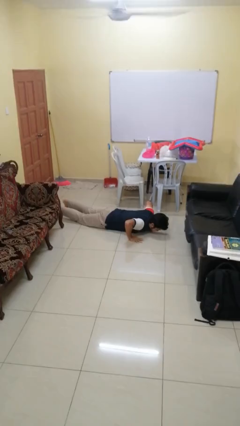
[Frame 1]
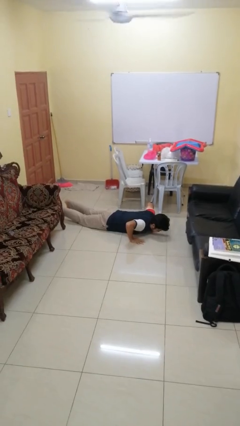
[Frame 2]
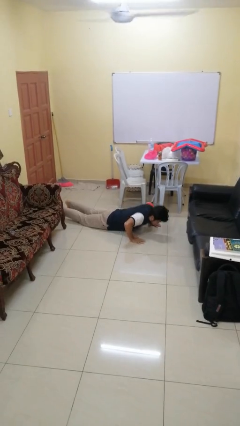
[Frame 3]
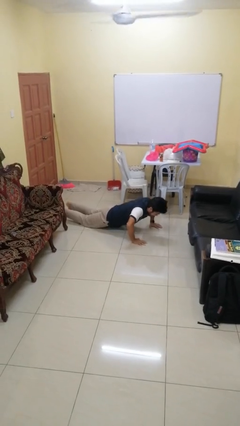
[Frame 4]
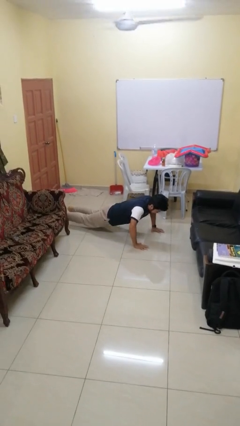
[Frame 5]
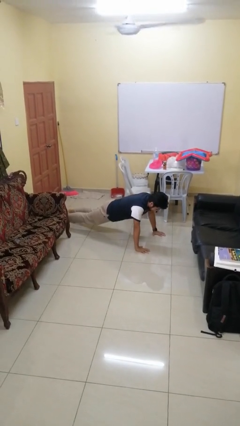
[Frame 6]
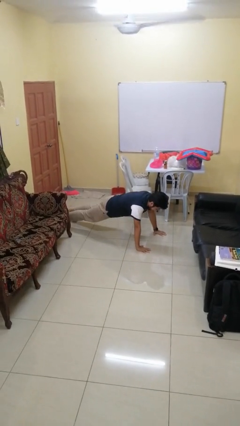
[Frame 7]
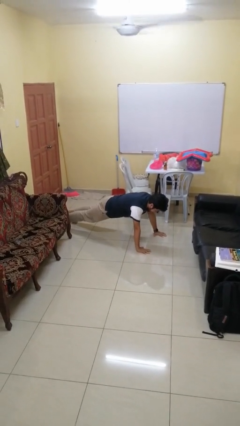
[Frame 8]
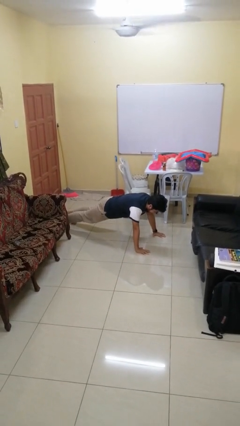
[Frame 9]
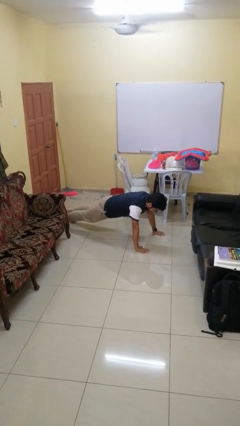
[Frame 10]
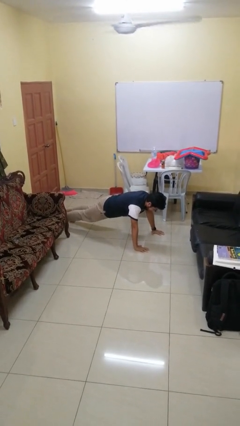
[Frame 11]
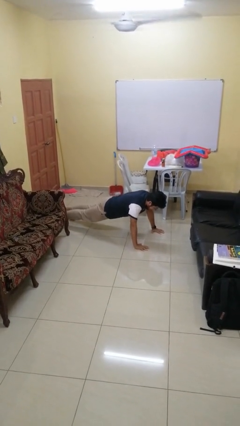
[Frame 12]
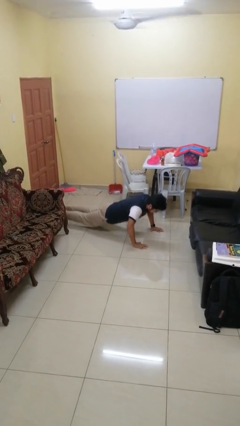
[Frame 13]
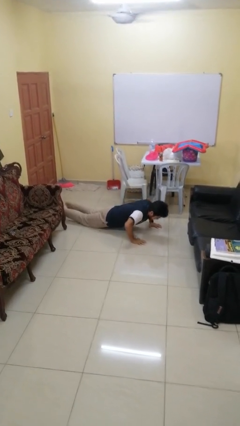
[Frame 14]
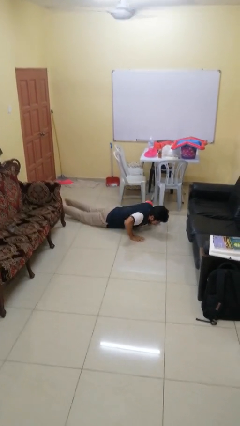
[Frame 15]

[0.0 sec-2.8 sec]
person exercises with pushup

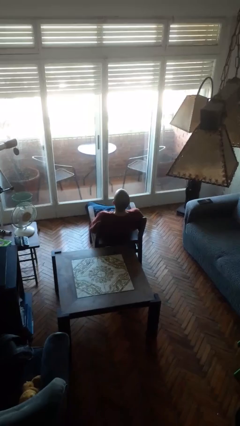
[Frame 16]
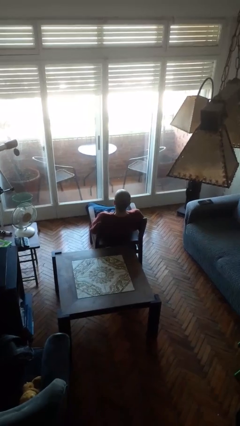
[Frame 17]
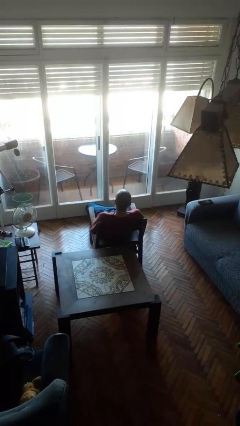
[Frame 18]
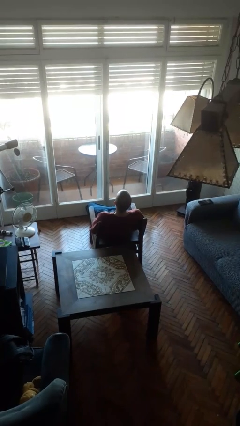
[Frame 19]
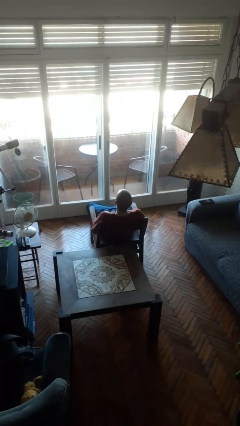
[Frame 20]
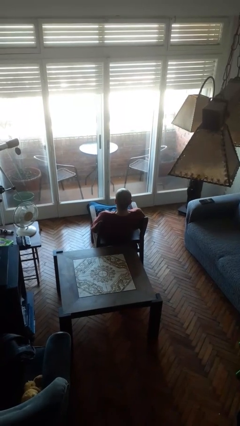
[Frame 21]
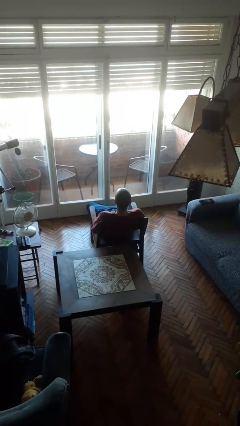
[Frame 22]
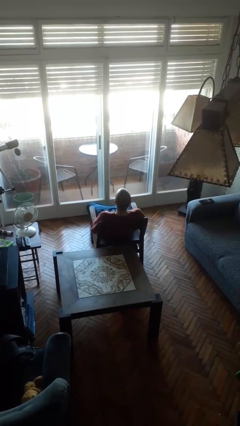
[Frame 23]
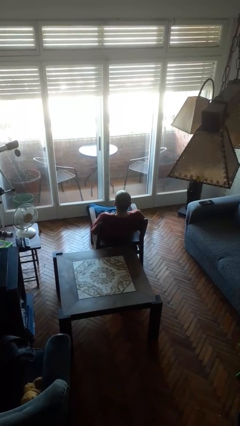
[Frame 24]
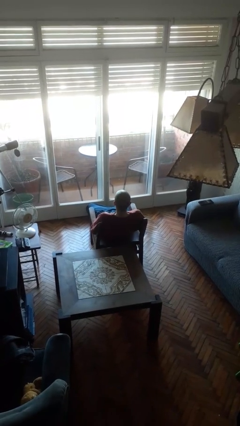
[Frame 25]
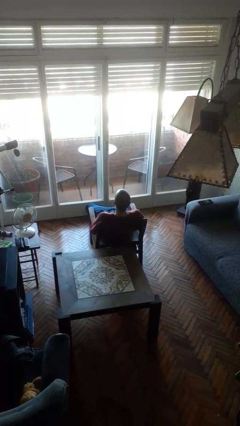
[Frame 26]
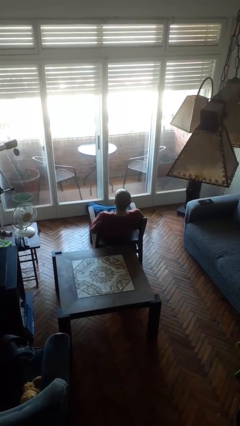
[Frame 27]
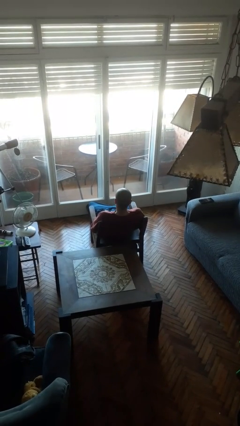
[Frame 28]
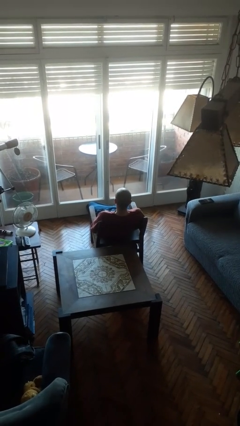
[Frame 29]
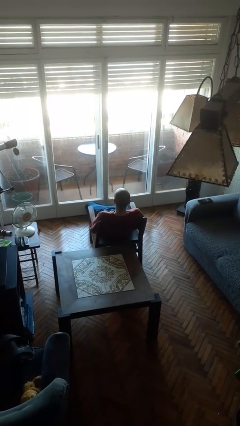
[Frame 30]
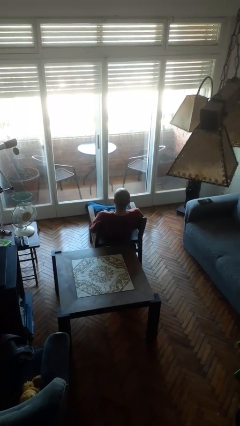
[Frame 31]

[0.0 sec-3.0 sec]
person nods head

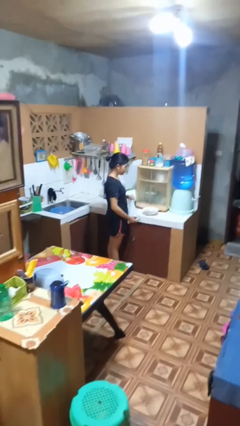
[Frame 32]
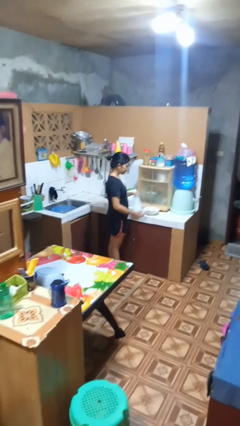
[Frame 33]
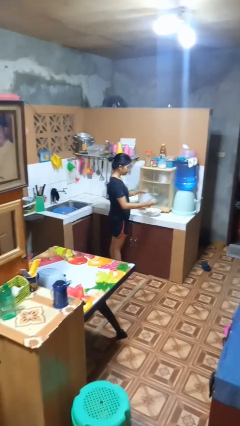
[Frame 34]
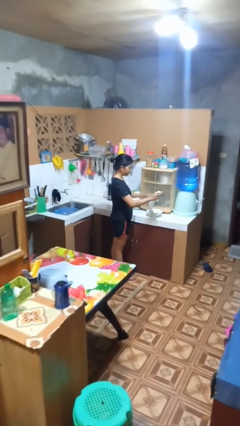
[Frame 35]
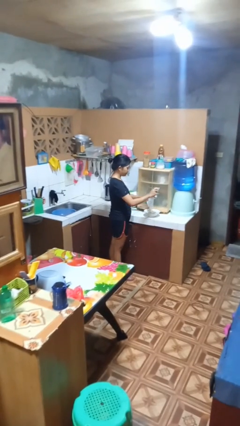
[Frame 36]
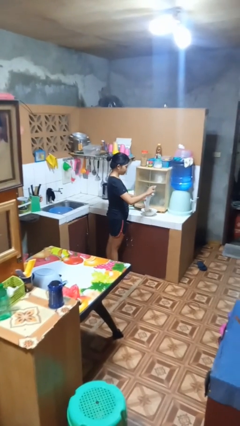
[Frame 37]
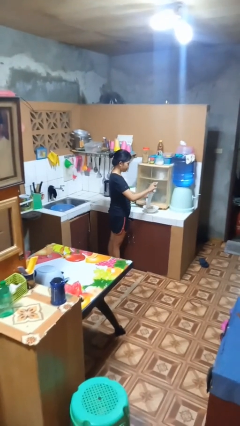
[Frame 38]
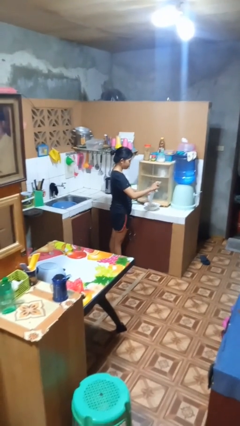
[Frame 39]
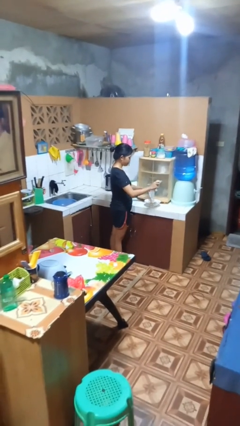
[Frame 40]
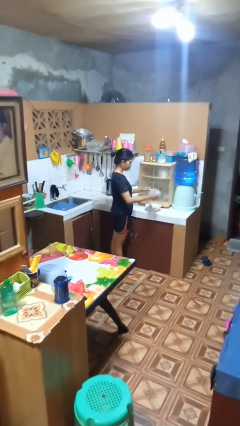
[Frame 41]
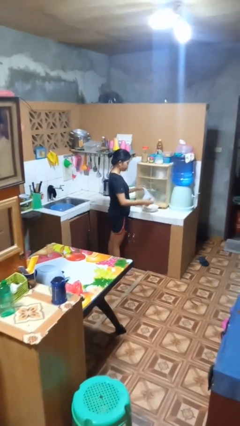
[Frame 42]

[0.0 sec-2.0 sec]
person pours into bowl

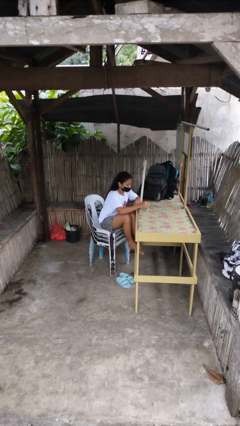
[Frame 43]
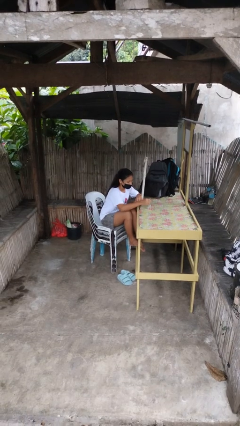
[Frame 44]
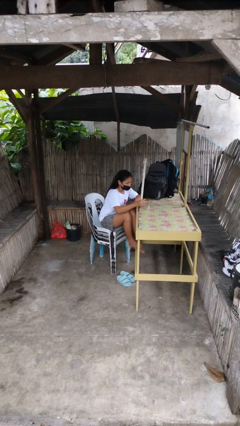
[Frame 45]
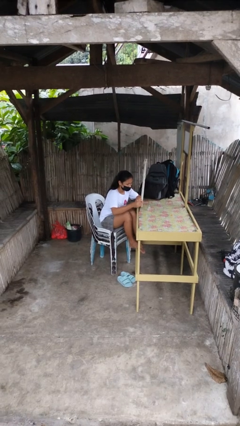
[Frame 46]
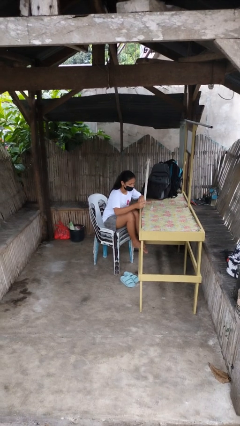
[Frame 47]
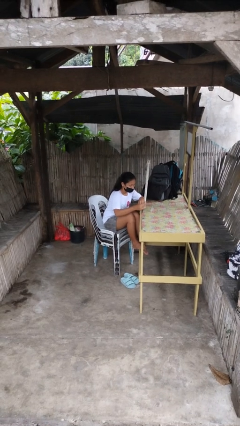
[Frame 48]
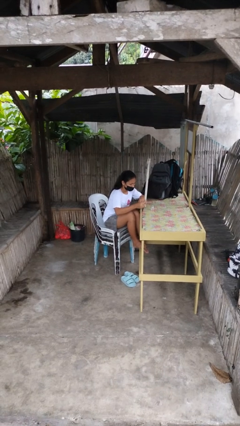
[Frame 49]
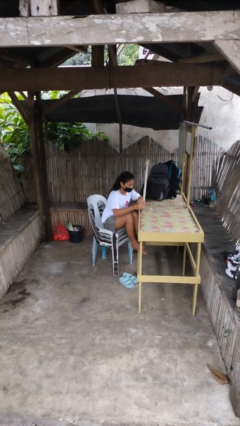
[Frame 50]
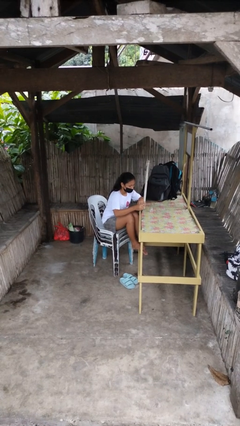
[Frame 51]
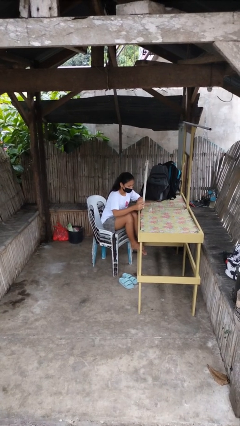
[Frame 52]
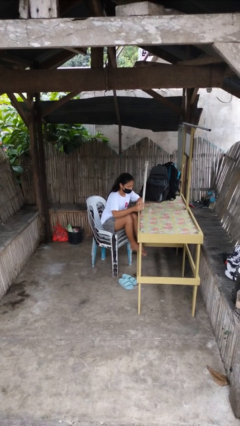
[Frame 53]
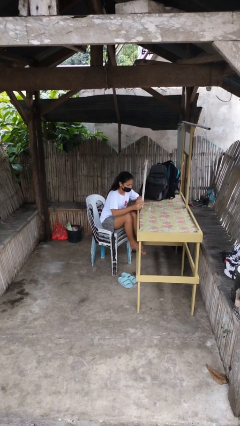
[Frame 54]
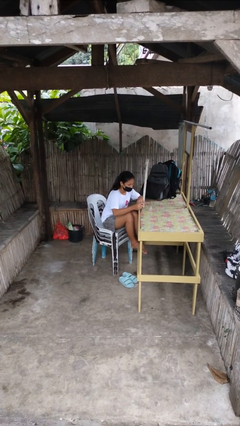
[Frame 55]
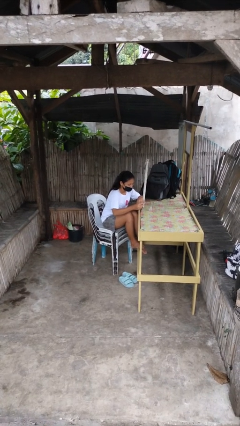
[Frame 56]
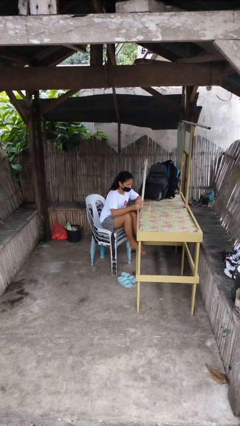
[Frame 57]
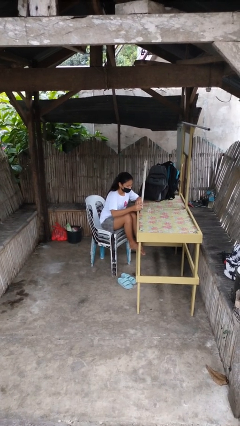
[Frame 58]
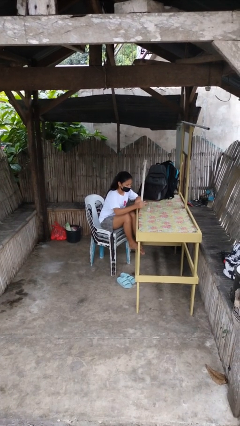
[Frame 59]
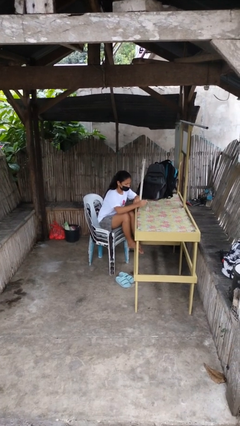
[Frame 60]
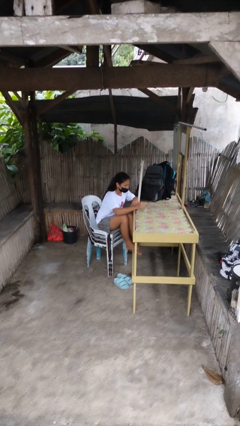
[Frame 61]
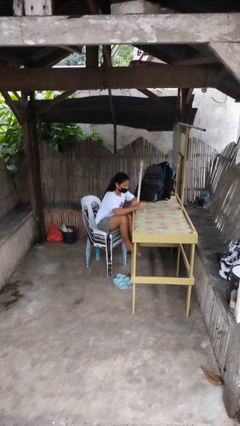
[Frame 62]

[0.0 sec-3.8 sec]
person paints fingernails

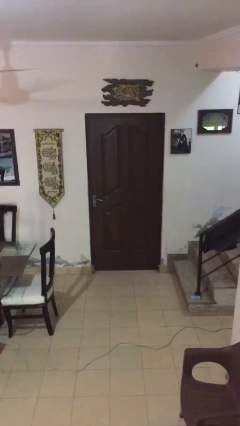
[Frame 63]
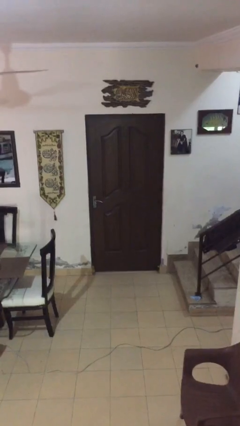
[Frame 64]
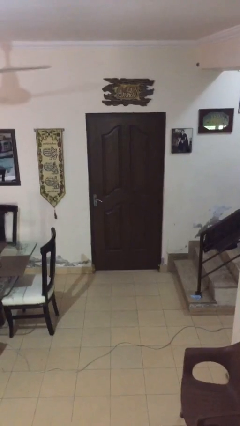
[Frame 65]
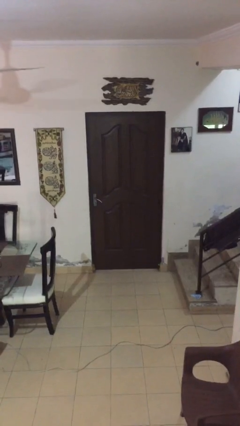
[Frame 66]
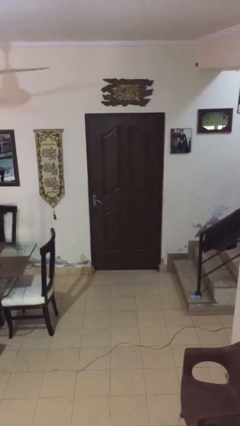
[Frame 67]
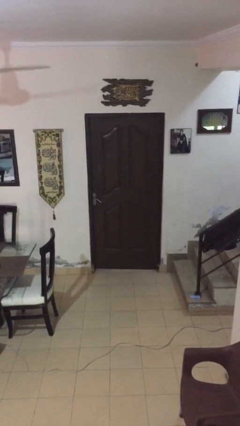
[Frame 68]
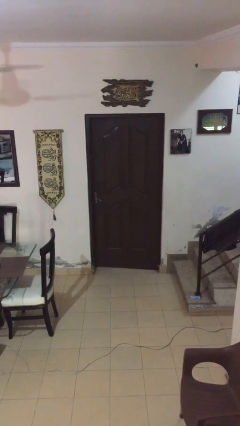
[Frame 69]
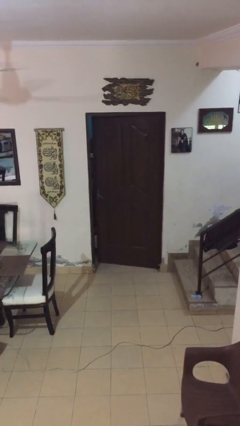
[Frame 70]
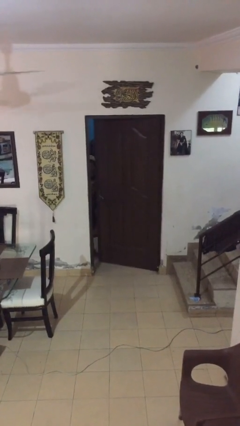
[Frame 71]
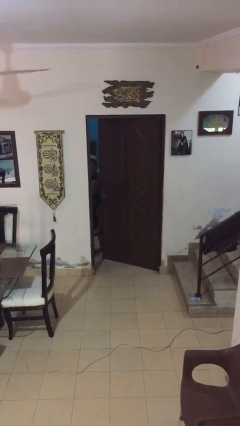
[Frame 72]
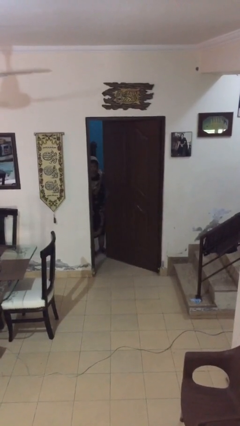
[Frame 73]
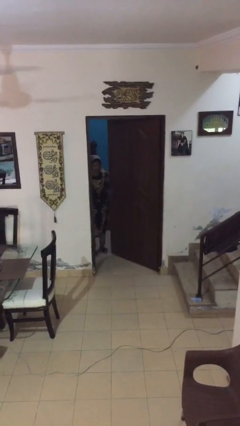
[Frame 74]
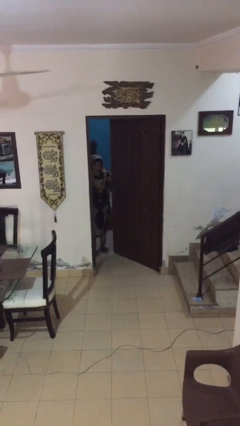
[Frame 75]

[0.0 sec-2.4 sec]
person opens facility door

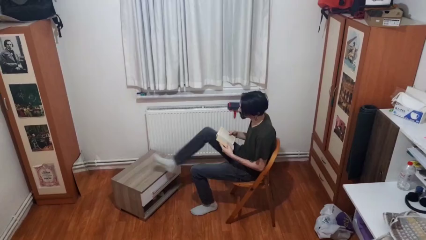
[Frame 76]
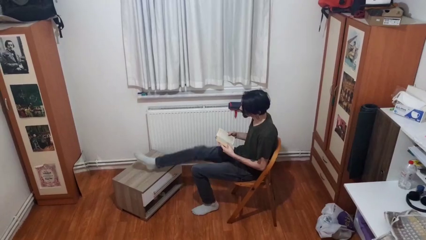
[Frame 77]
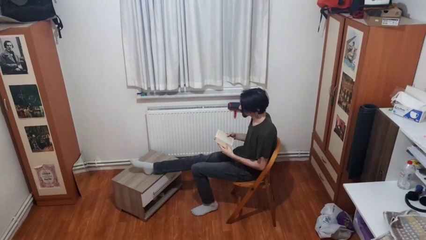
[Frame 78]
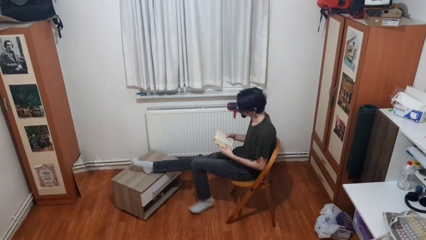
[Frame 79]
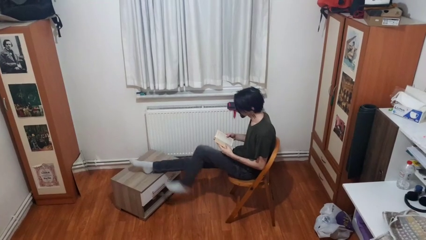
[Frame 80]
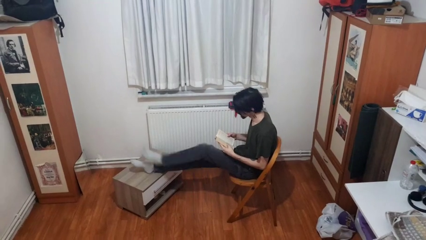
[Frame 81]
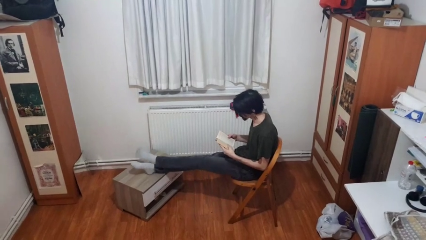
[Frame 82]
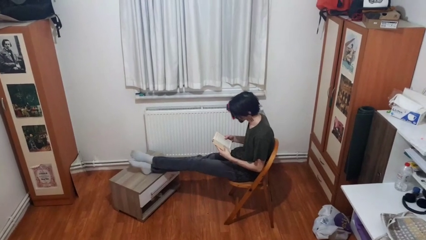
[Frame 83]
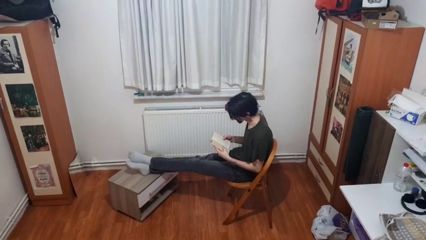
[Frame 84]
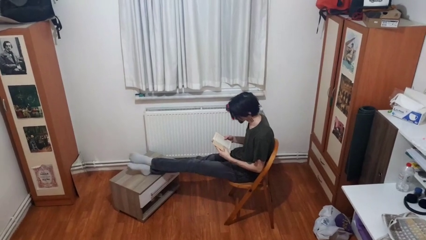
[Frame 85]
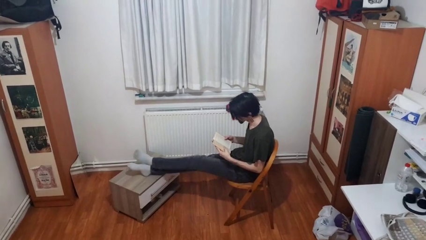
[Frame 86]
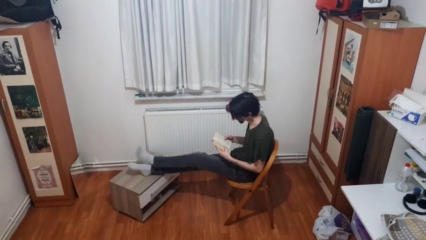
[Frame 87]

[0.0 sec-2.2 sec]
person puts feet up

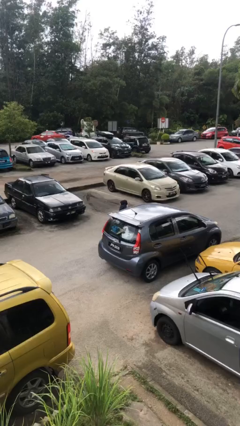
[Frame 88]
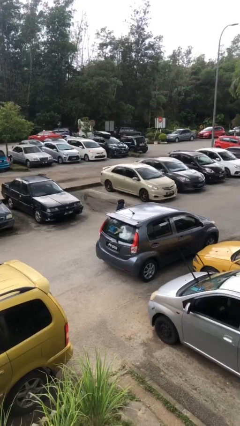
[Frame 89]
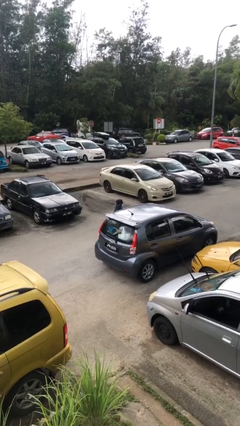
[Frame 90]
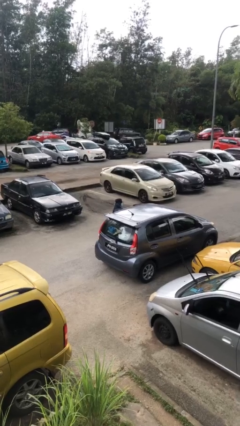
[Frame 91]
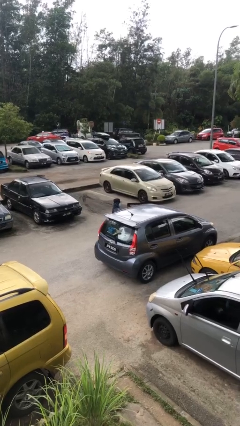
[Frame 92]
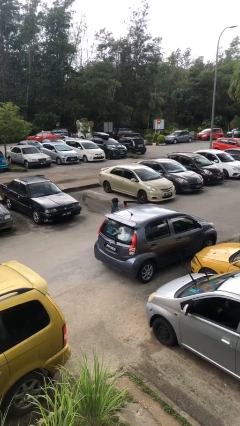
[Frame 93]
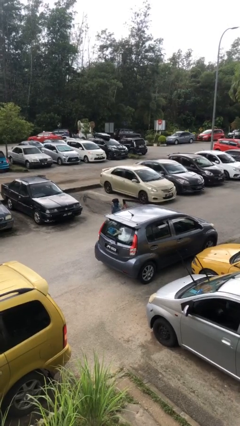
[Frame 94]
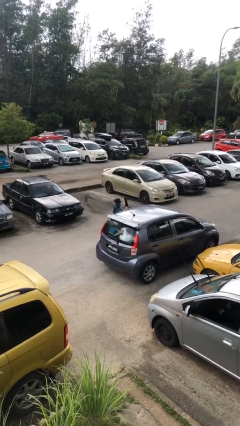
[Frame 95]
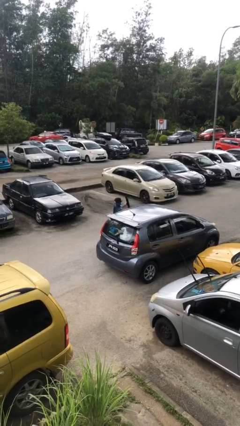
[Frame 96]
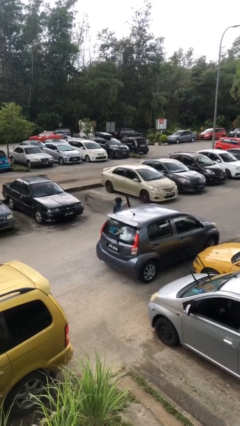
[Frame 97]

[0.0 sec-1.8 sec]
person opens car door
